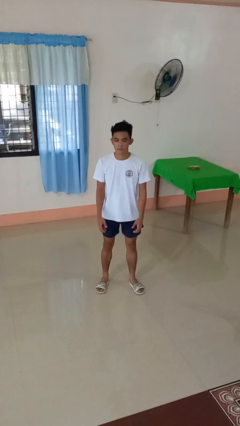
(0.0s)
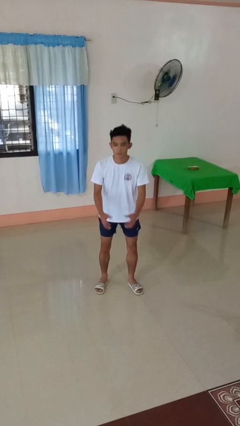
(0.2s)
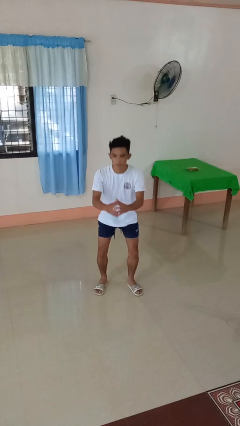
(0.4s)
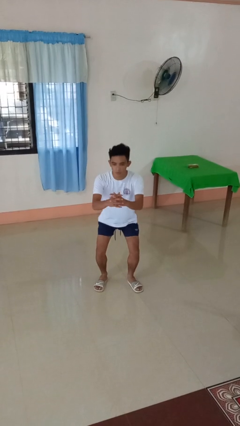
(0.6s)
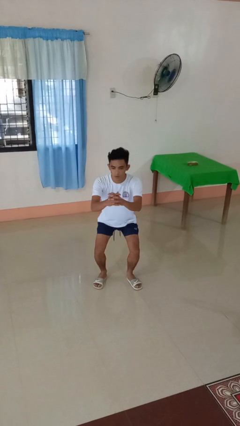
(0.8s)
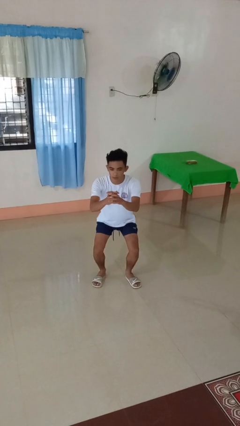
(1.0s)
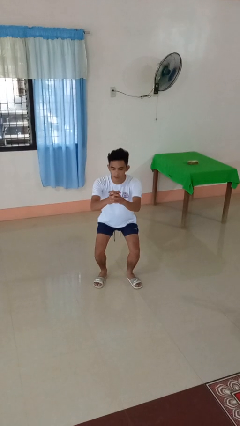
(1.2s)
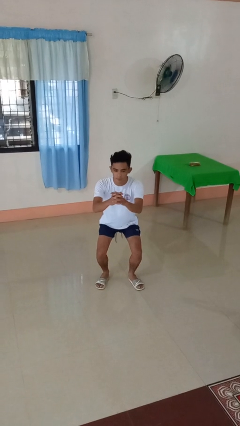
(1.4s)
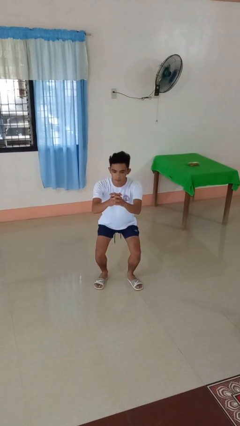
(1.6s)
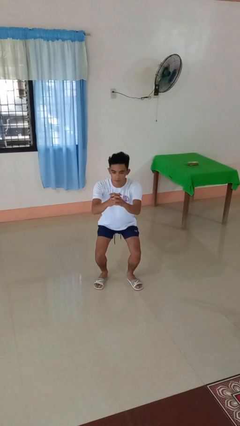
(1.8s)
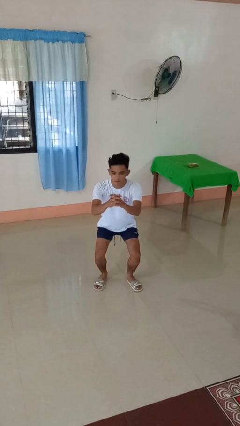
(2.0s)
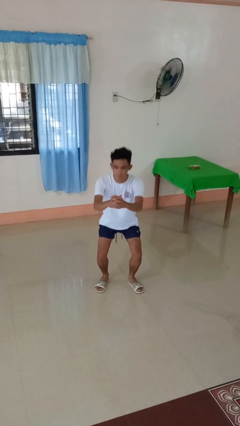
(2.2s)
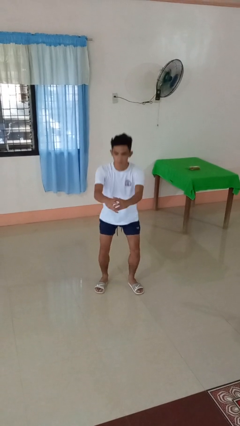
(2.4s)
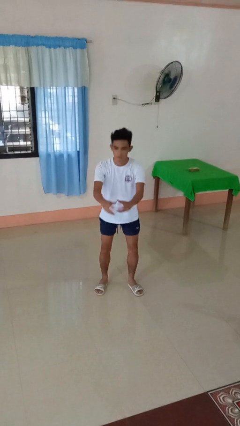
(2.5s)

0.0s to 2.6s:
person squats

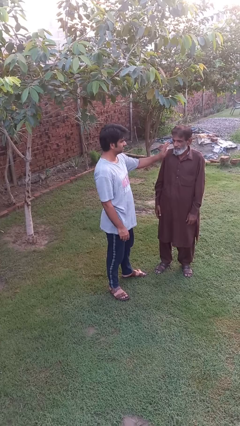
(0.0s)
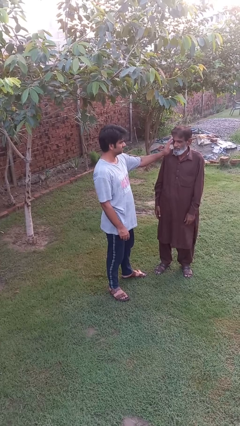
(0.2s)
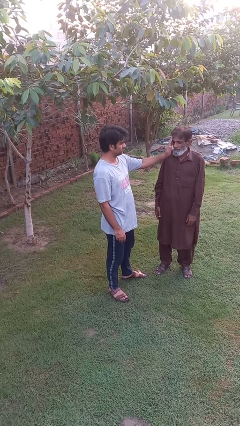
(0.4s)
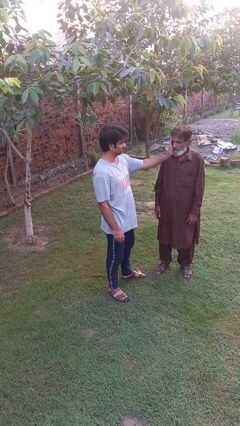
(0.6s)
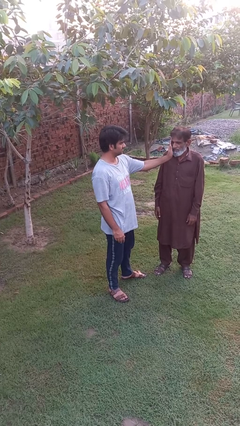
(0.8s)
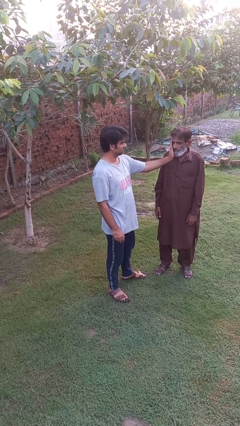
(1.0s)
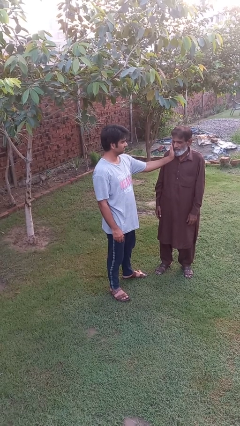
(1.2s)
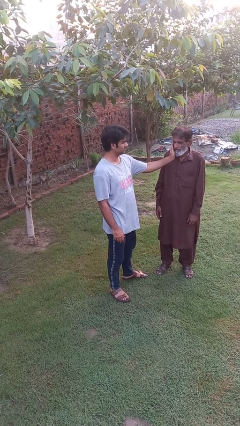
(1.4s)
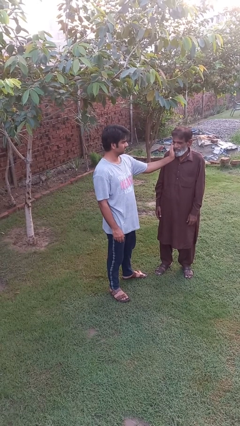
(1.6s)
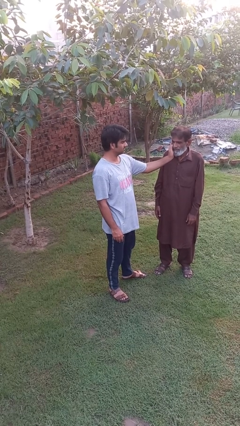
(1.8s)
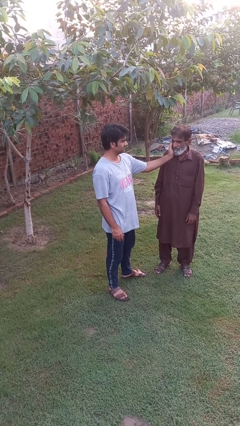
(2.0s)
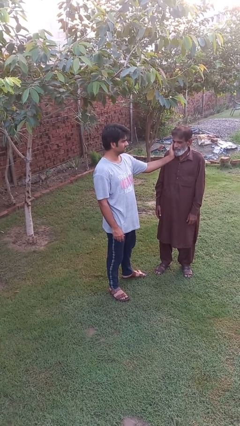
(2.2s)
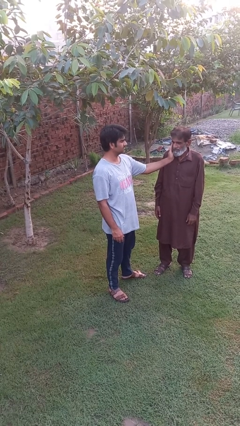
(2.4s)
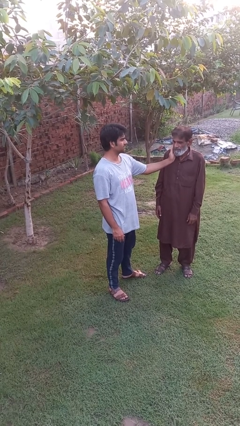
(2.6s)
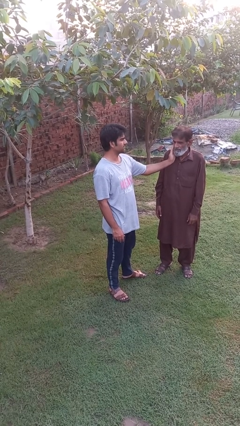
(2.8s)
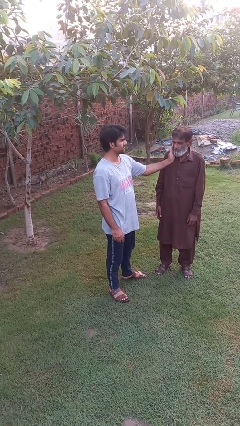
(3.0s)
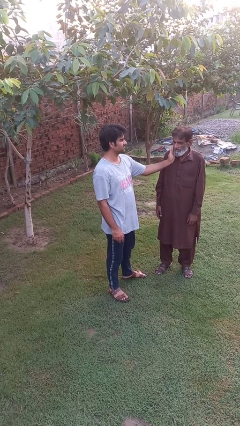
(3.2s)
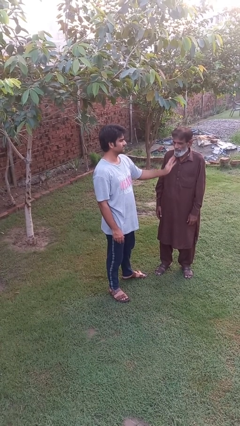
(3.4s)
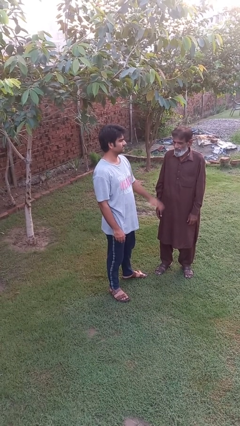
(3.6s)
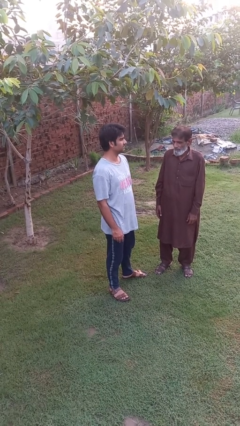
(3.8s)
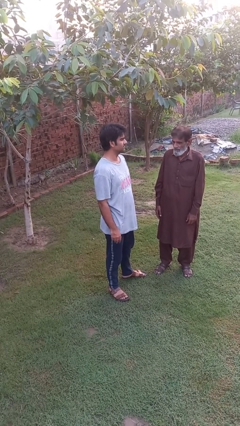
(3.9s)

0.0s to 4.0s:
person touches face of person

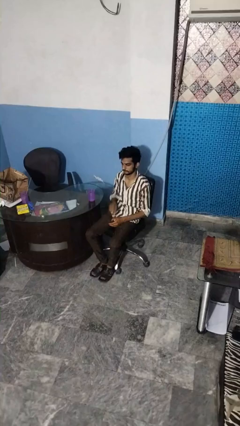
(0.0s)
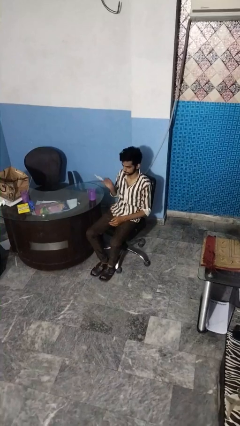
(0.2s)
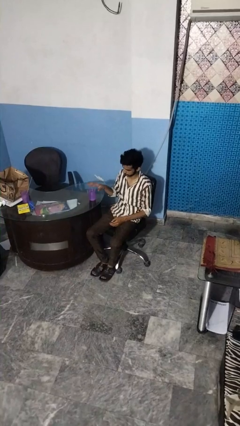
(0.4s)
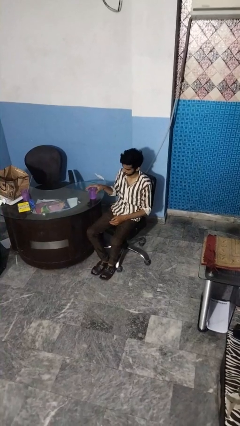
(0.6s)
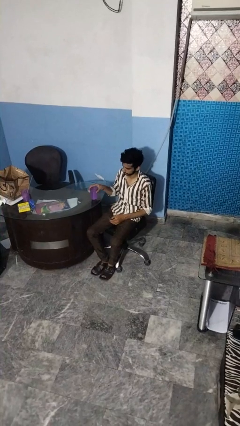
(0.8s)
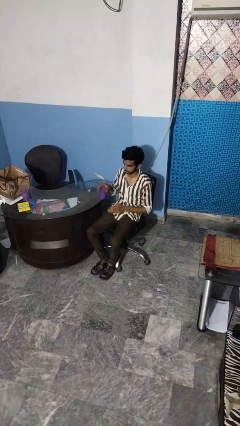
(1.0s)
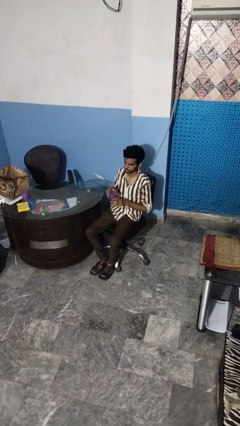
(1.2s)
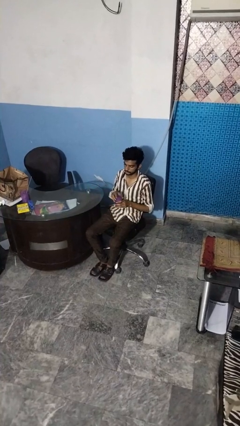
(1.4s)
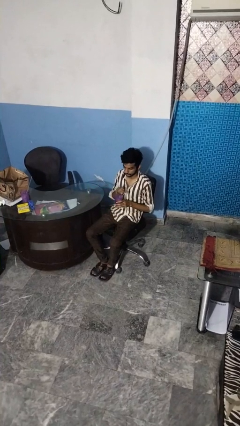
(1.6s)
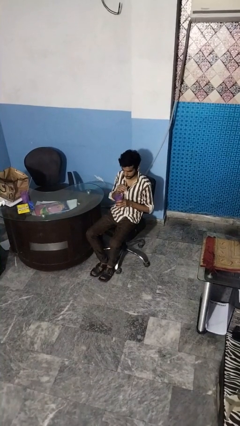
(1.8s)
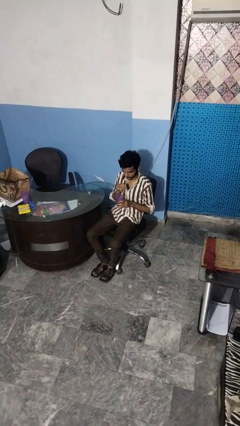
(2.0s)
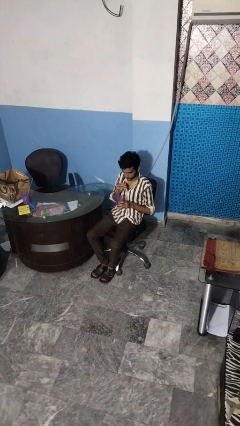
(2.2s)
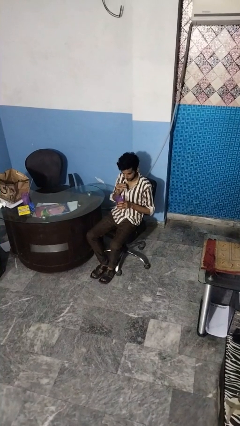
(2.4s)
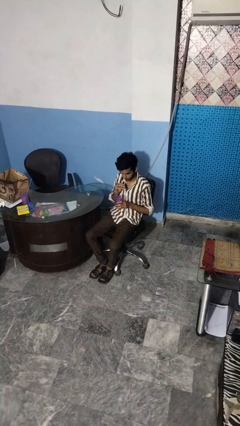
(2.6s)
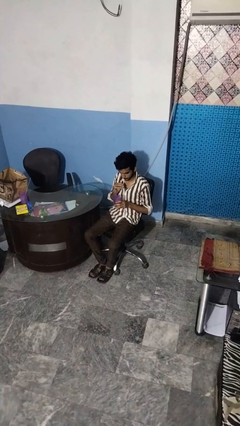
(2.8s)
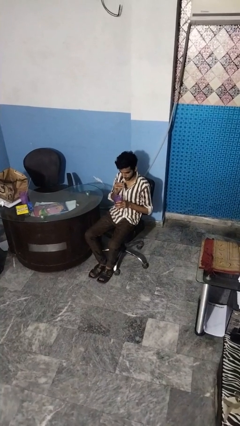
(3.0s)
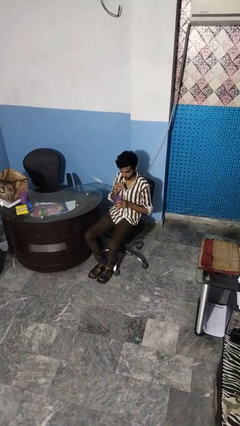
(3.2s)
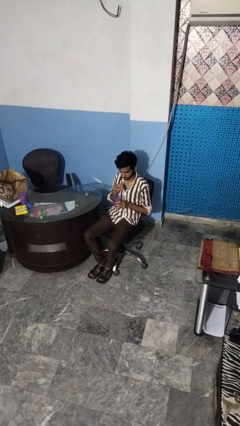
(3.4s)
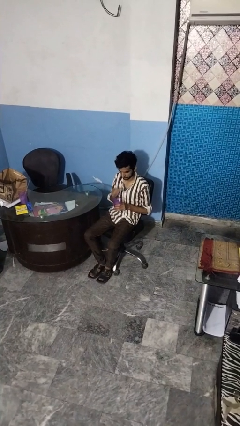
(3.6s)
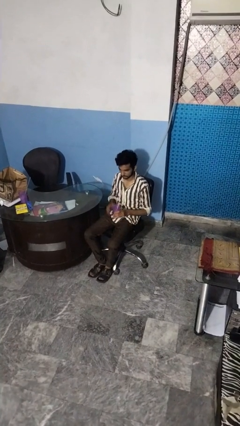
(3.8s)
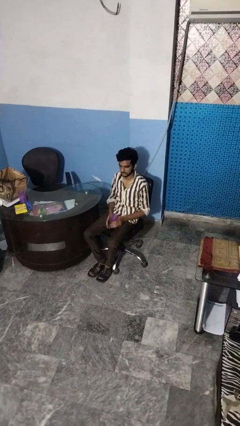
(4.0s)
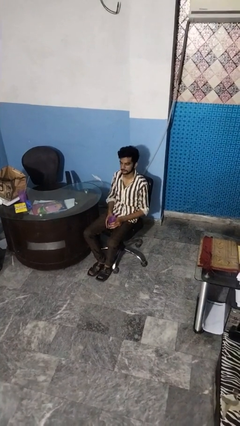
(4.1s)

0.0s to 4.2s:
person drinks from straw

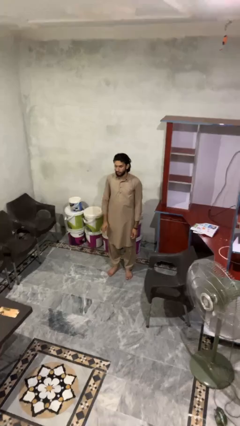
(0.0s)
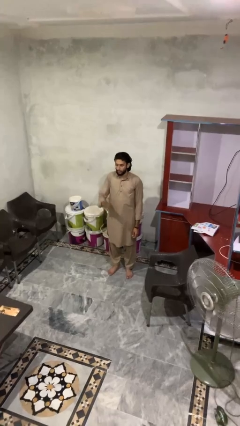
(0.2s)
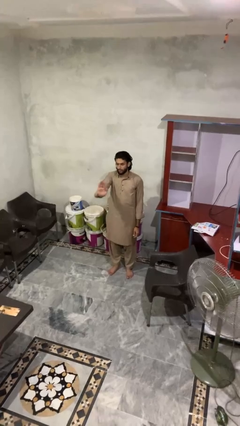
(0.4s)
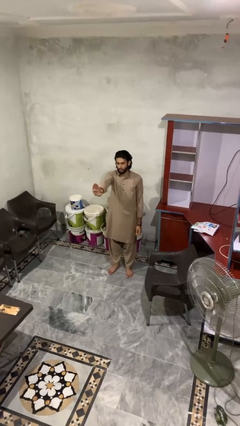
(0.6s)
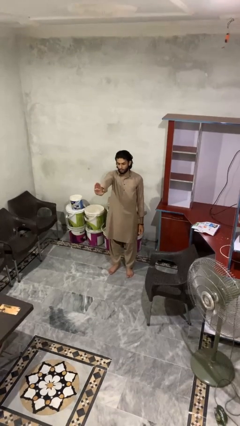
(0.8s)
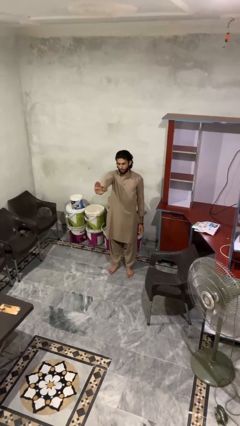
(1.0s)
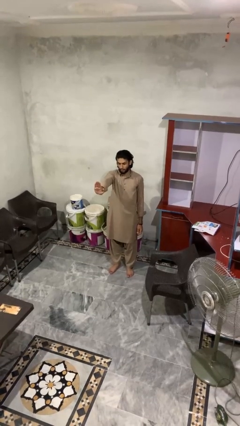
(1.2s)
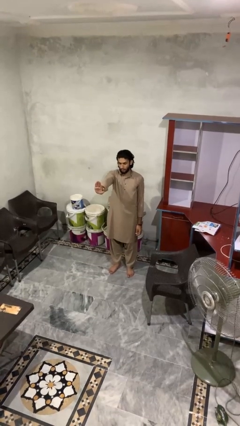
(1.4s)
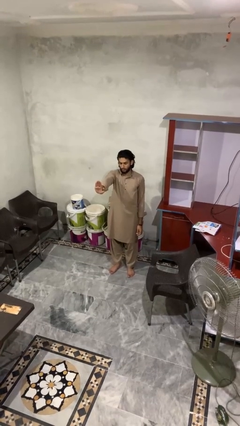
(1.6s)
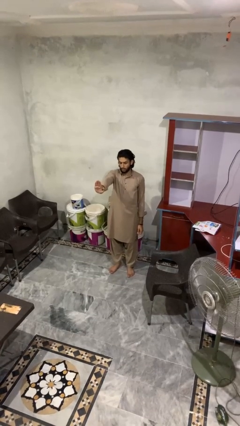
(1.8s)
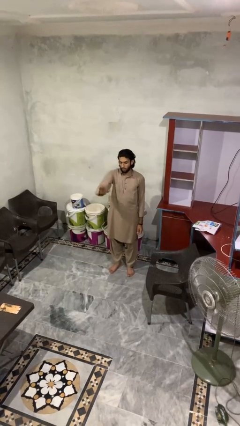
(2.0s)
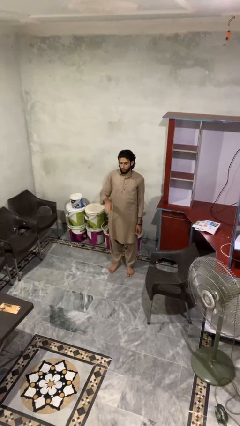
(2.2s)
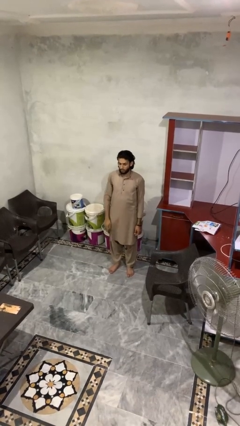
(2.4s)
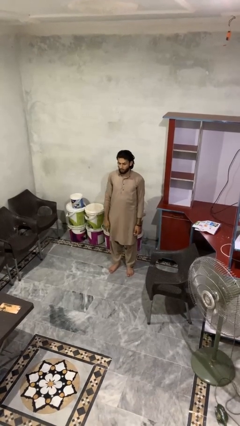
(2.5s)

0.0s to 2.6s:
person gestures stop

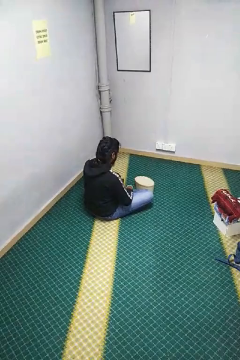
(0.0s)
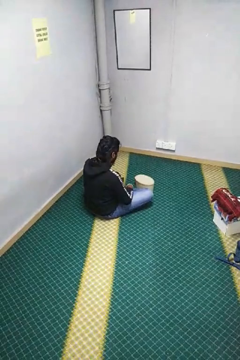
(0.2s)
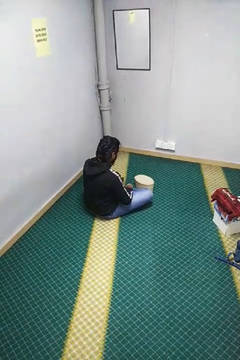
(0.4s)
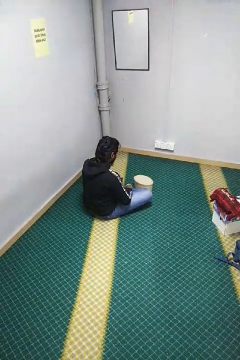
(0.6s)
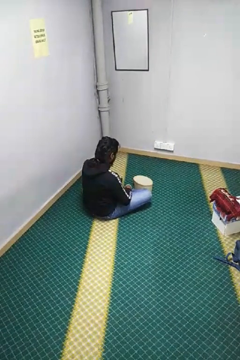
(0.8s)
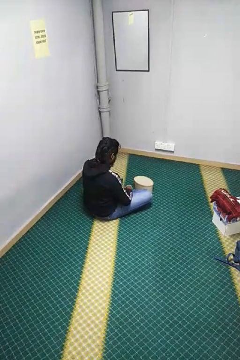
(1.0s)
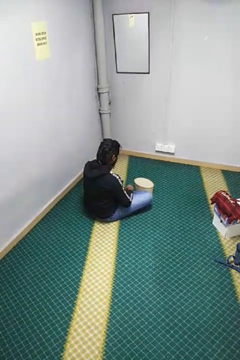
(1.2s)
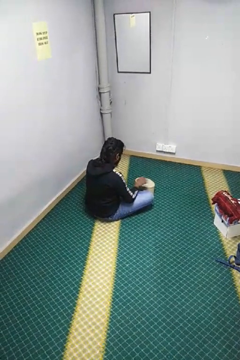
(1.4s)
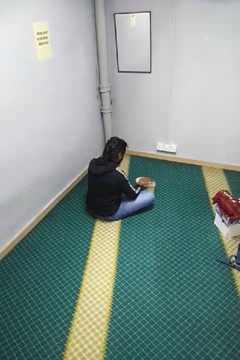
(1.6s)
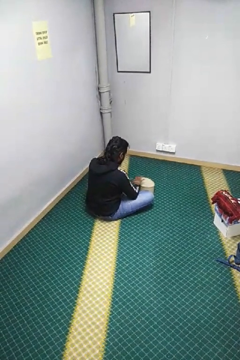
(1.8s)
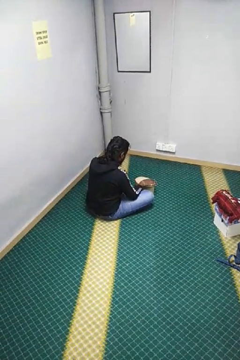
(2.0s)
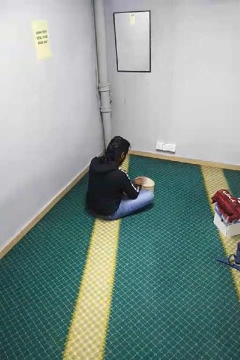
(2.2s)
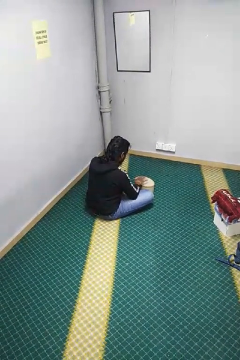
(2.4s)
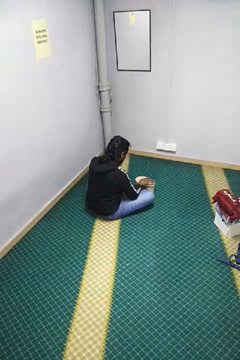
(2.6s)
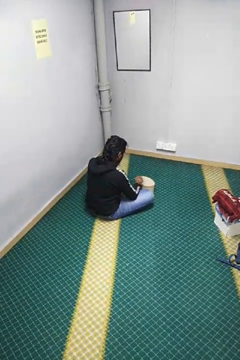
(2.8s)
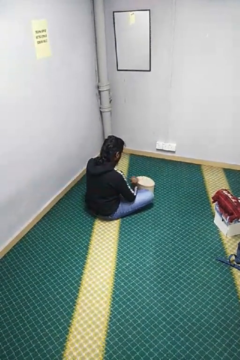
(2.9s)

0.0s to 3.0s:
person waves hand over object

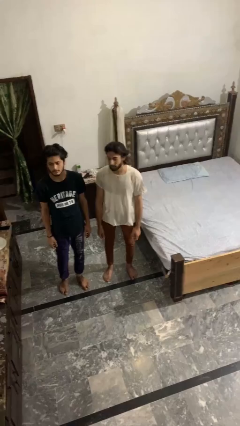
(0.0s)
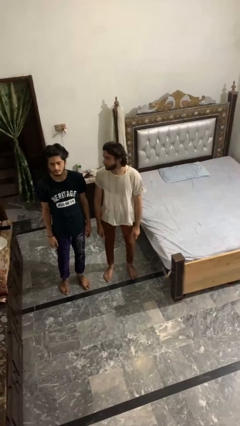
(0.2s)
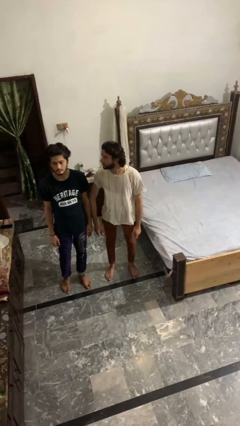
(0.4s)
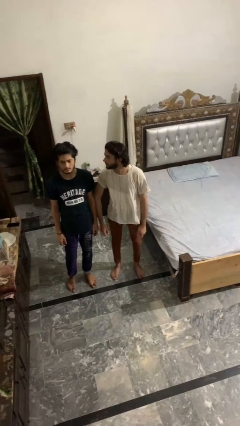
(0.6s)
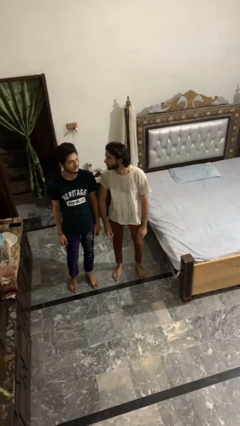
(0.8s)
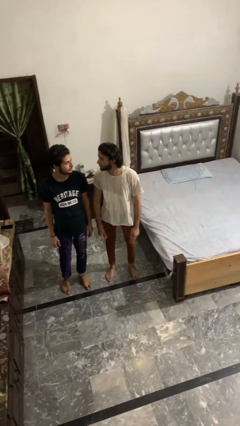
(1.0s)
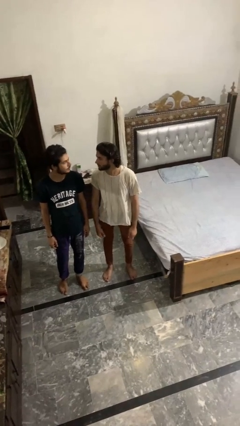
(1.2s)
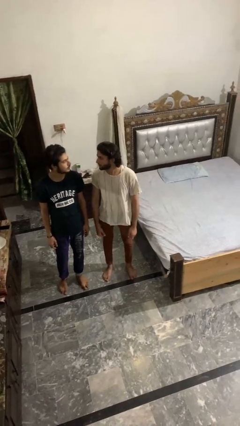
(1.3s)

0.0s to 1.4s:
person nudges person with elbow
